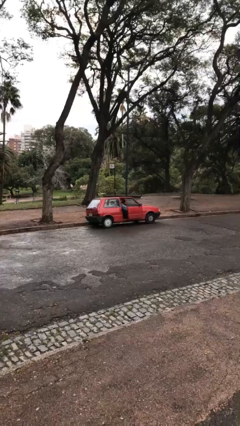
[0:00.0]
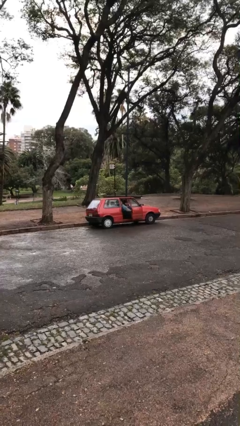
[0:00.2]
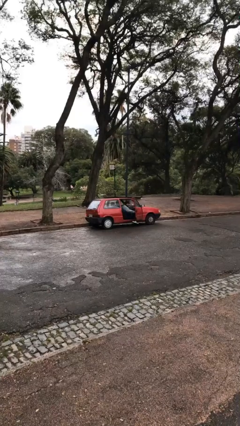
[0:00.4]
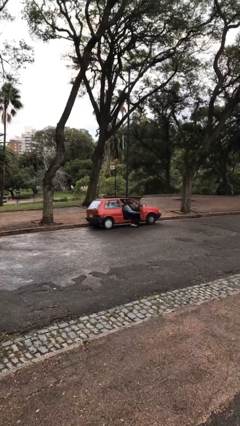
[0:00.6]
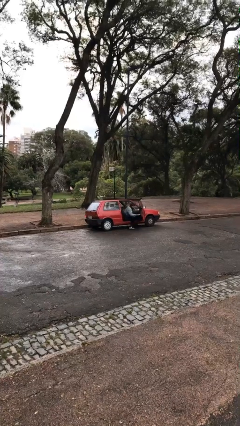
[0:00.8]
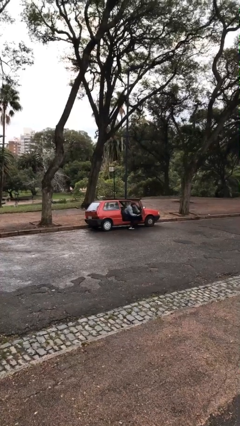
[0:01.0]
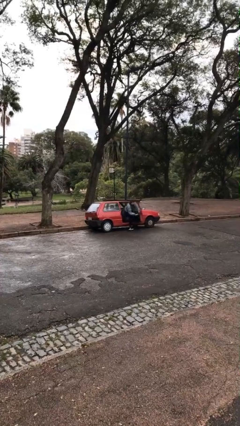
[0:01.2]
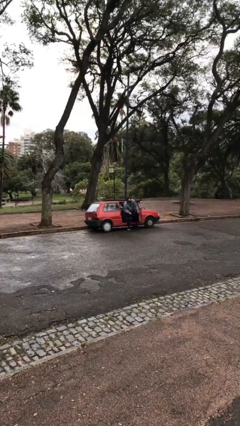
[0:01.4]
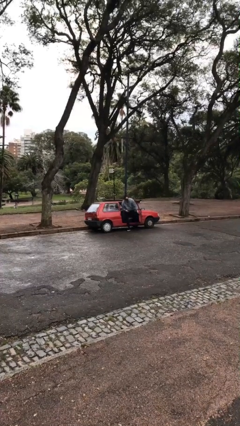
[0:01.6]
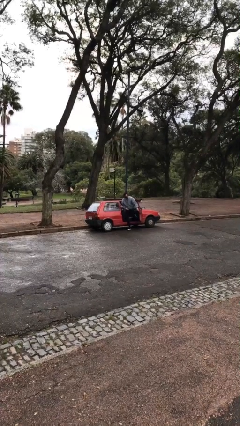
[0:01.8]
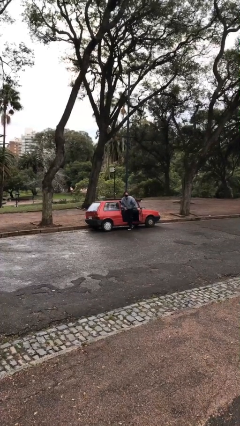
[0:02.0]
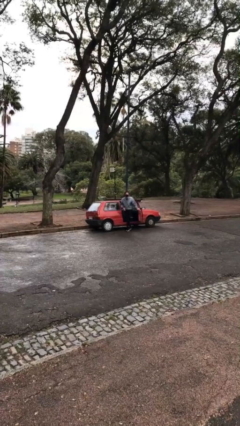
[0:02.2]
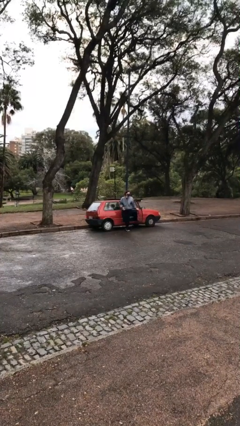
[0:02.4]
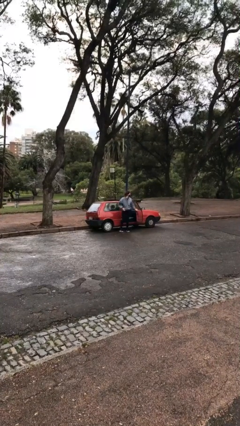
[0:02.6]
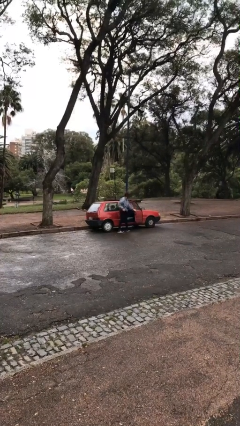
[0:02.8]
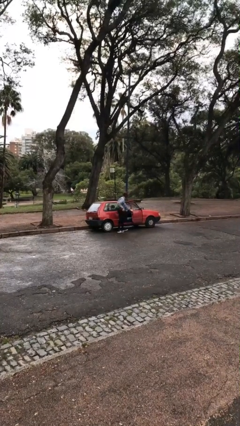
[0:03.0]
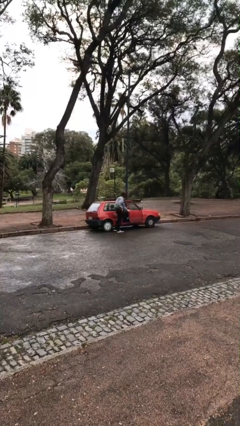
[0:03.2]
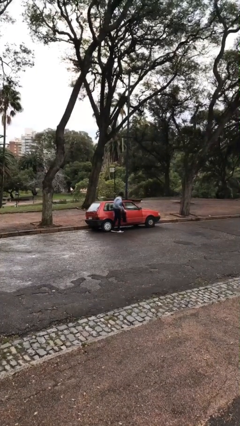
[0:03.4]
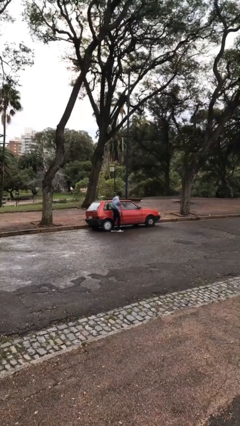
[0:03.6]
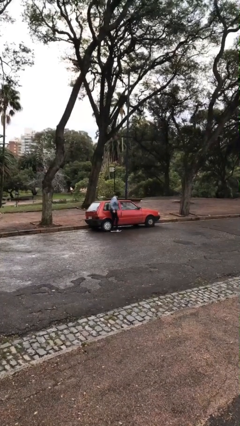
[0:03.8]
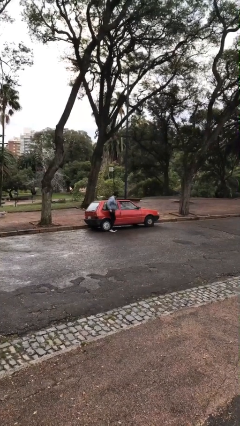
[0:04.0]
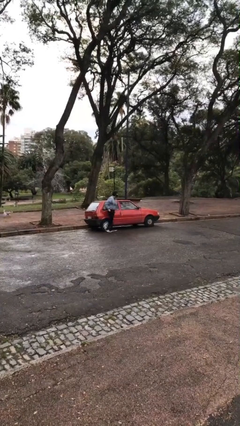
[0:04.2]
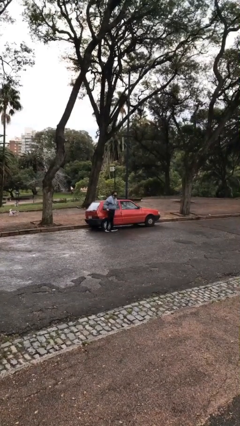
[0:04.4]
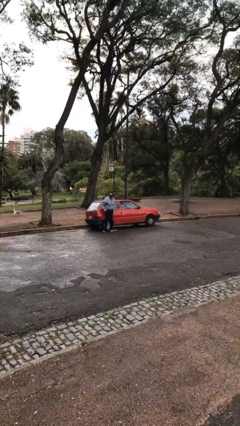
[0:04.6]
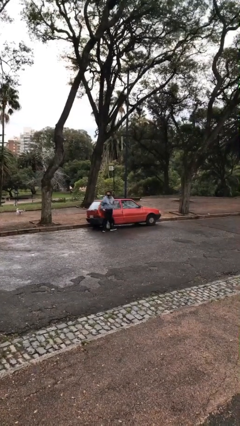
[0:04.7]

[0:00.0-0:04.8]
car drops off person

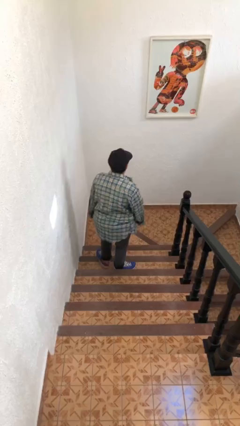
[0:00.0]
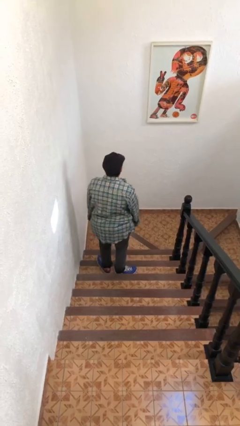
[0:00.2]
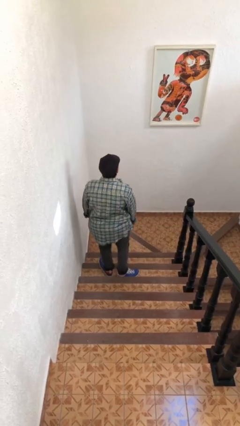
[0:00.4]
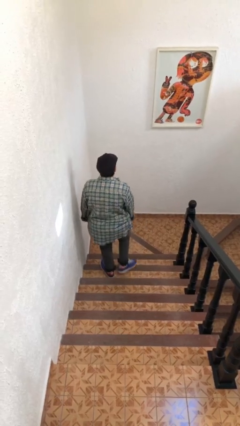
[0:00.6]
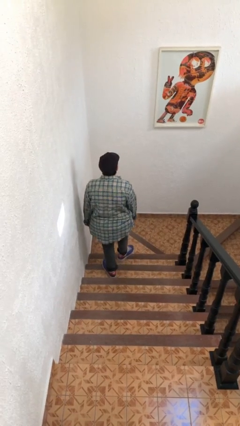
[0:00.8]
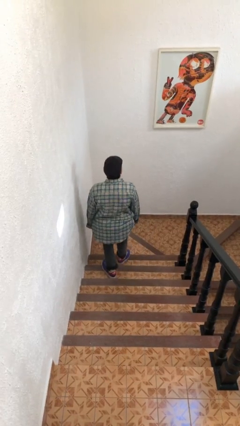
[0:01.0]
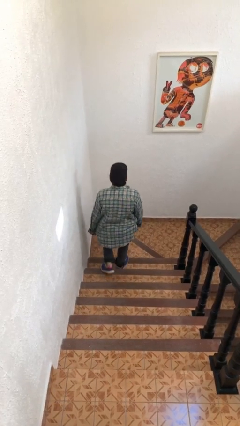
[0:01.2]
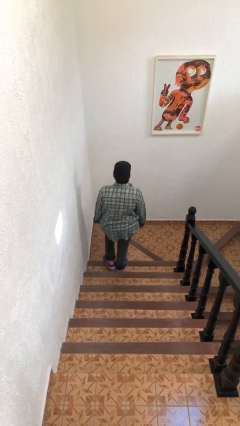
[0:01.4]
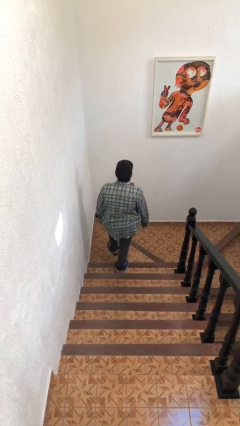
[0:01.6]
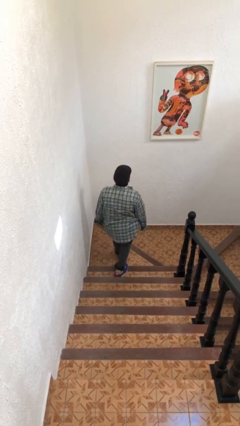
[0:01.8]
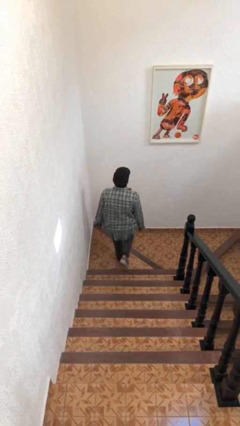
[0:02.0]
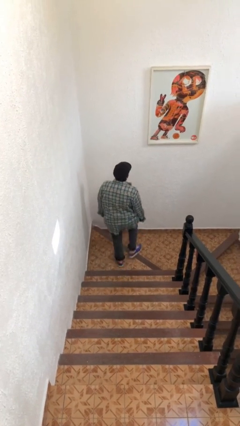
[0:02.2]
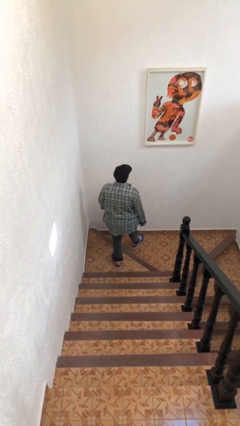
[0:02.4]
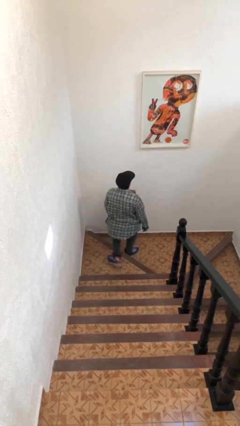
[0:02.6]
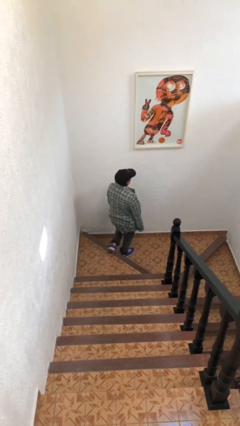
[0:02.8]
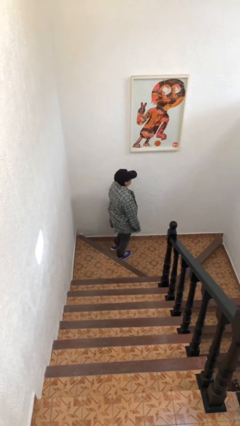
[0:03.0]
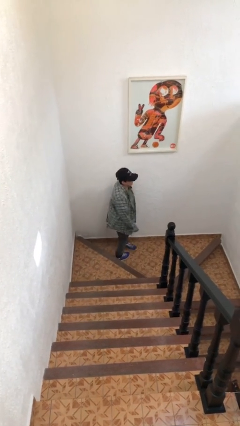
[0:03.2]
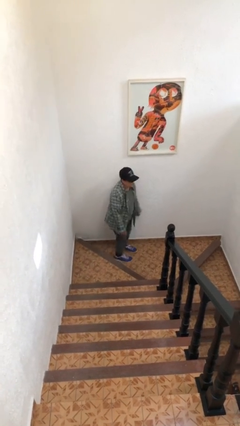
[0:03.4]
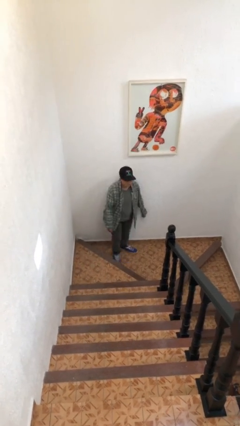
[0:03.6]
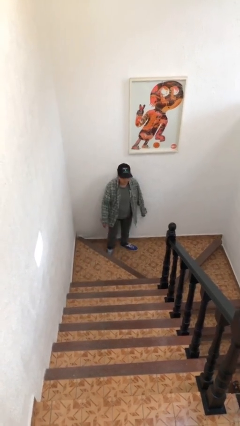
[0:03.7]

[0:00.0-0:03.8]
person climbs down stairs

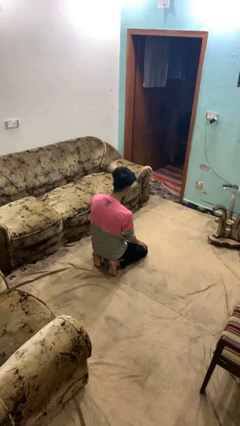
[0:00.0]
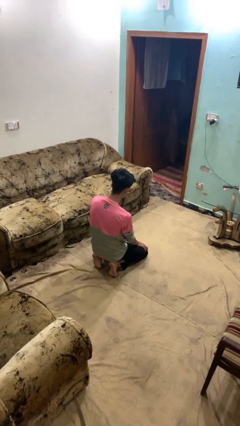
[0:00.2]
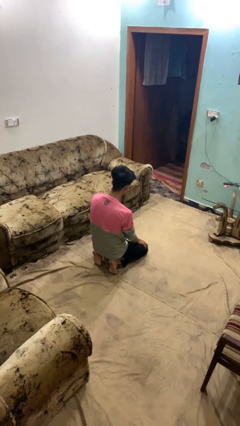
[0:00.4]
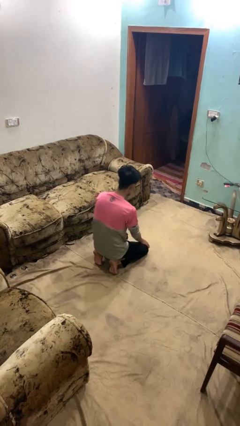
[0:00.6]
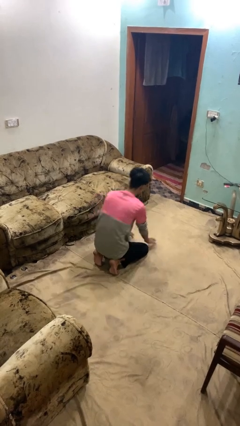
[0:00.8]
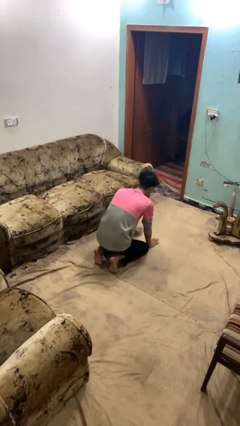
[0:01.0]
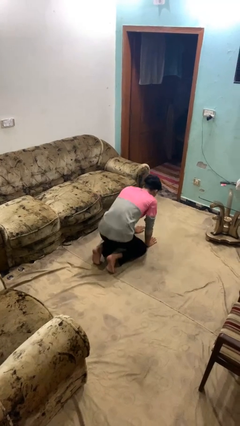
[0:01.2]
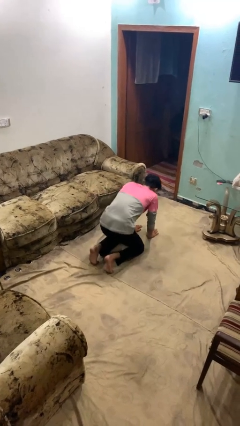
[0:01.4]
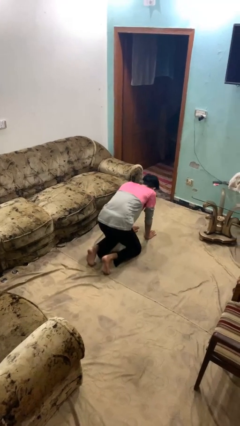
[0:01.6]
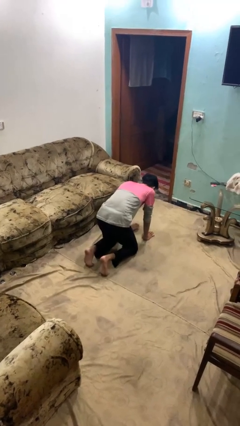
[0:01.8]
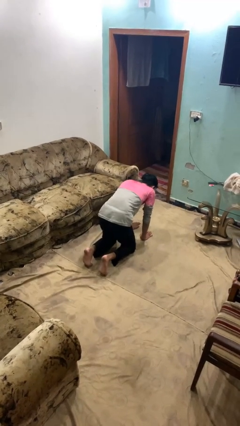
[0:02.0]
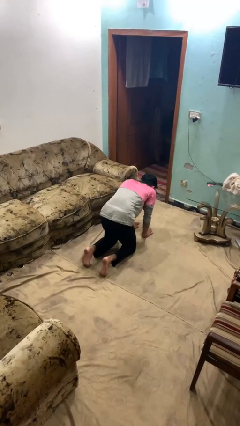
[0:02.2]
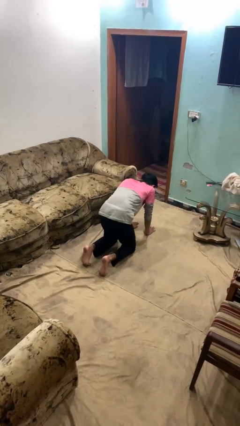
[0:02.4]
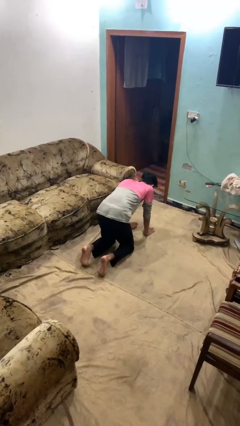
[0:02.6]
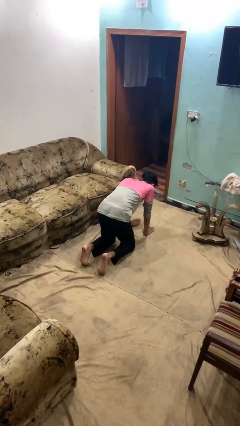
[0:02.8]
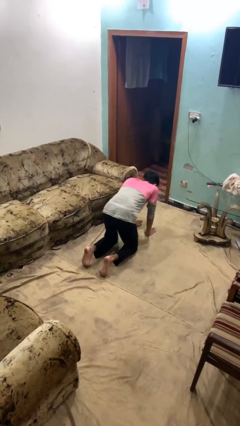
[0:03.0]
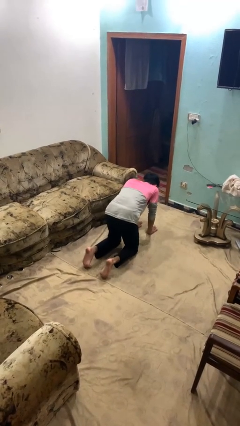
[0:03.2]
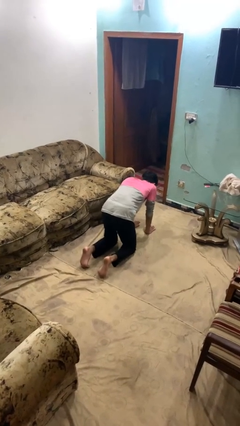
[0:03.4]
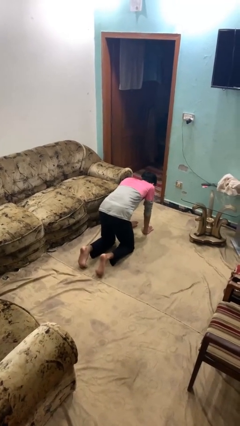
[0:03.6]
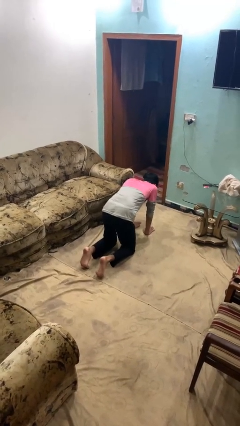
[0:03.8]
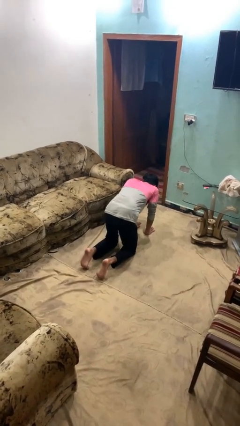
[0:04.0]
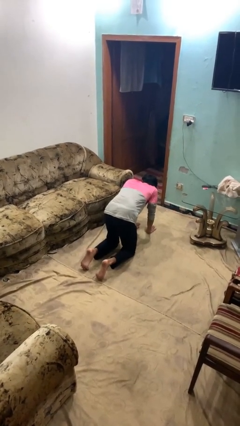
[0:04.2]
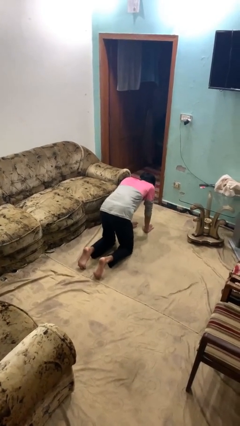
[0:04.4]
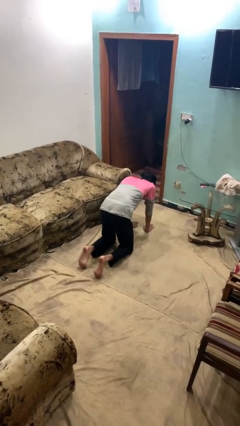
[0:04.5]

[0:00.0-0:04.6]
person crawls

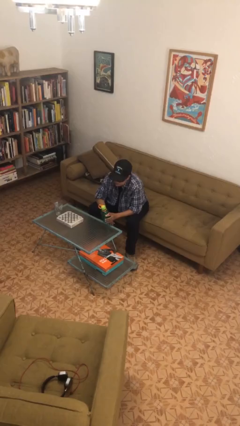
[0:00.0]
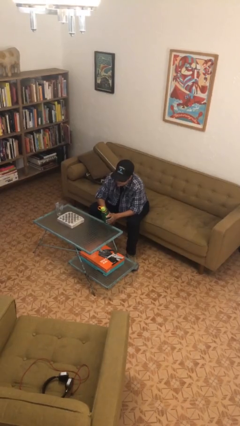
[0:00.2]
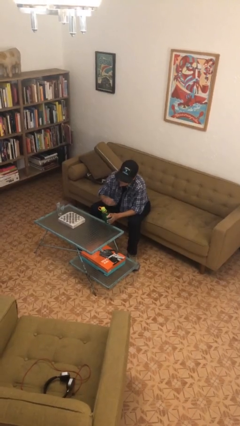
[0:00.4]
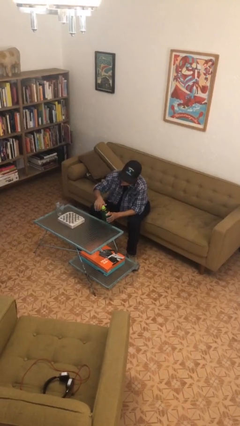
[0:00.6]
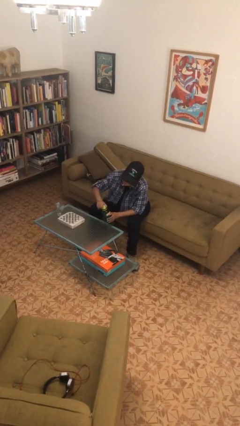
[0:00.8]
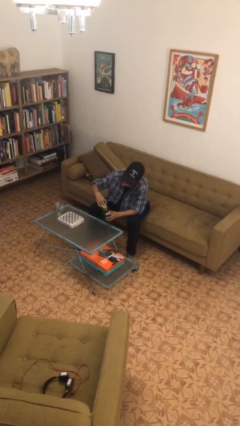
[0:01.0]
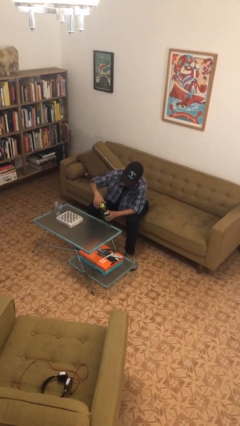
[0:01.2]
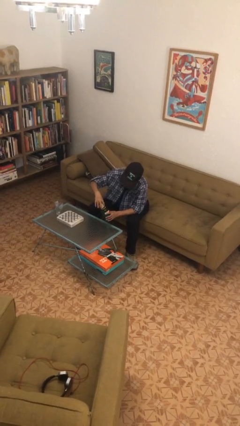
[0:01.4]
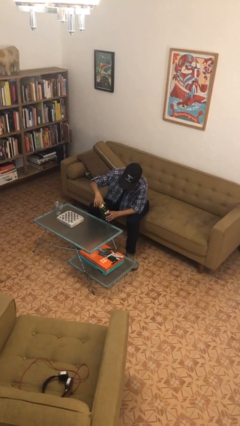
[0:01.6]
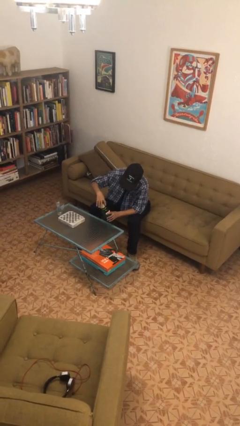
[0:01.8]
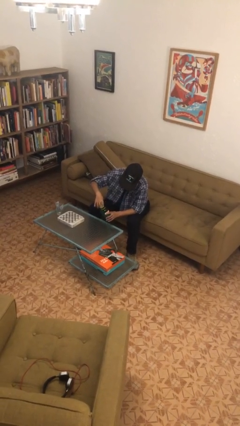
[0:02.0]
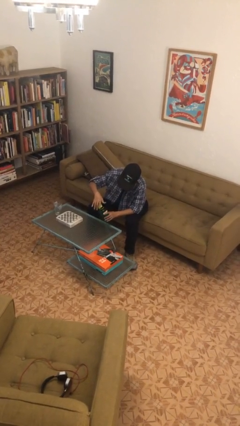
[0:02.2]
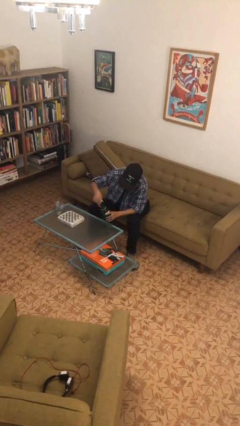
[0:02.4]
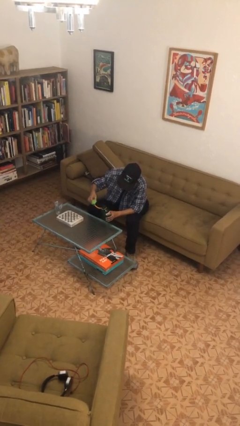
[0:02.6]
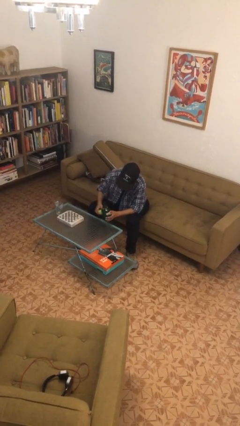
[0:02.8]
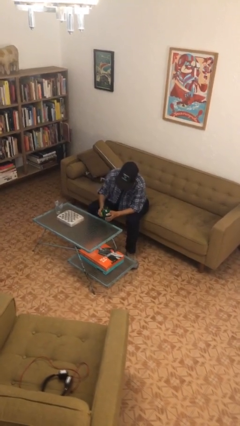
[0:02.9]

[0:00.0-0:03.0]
person unscrews lid from bottle

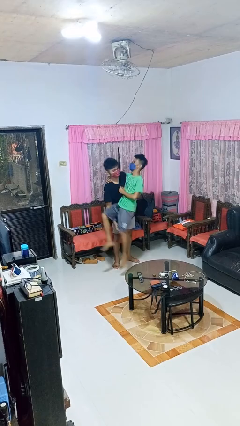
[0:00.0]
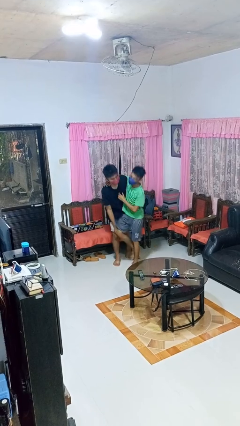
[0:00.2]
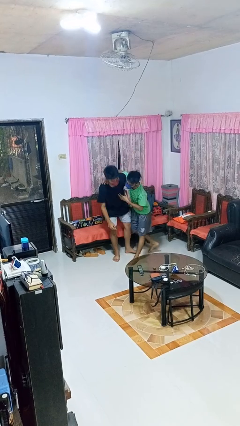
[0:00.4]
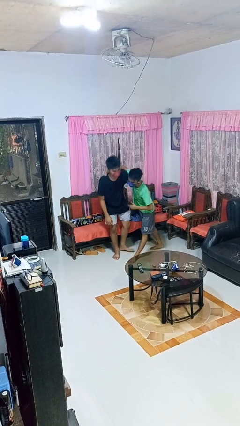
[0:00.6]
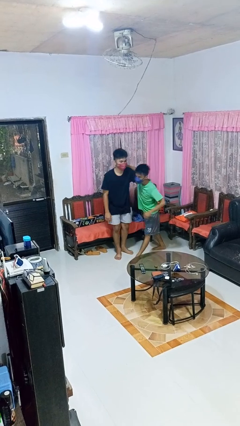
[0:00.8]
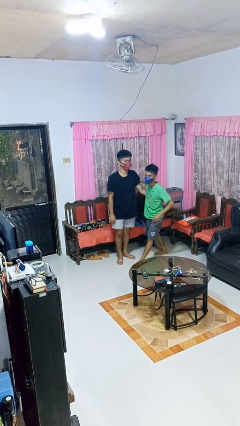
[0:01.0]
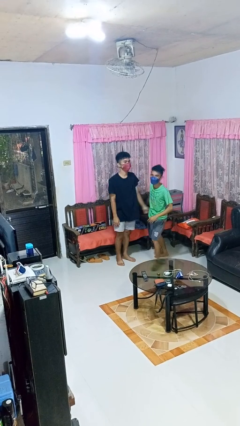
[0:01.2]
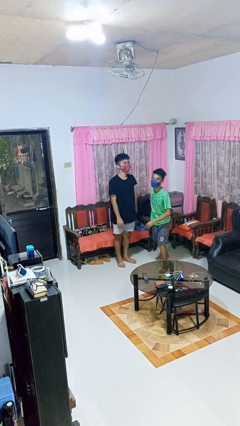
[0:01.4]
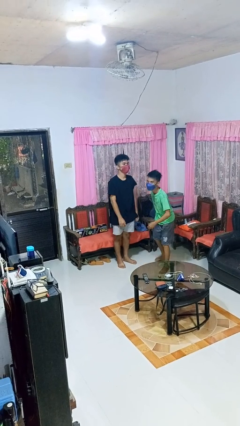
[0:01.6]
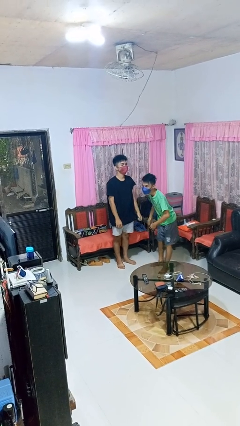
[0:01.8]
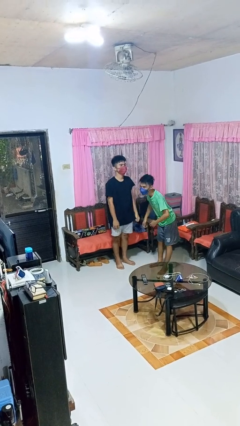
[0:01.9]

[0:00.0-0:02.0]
person puts down person
